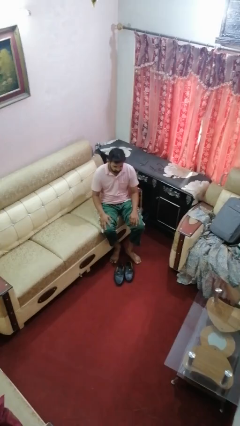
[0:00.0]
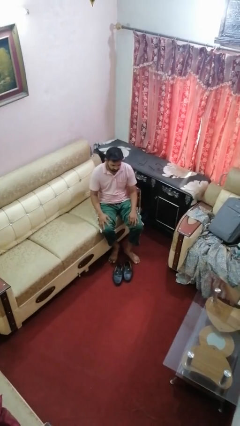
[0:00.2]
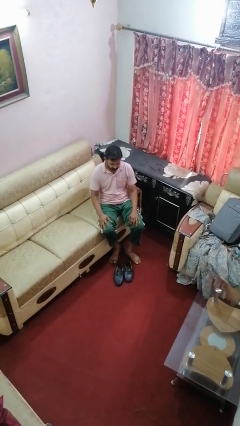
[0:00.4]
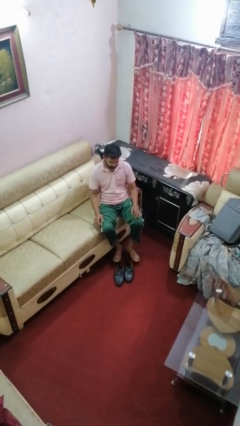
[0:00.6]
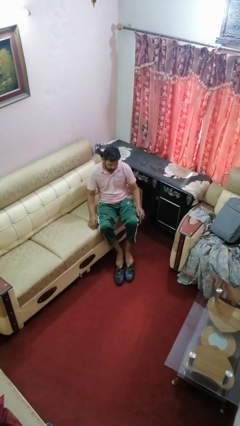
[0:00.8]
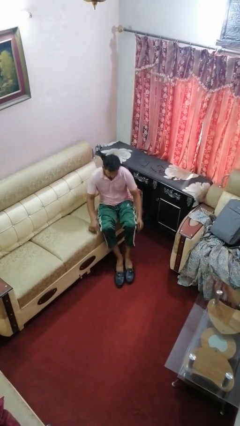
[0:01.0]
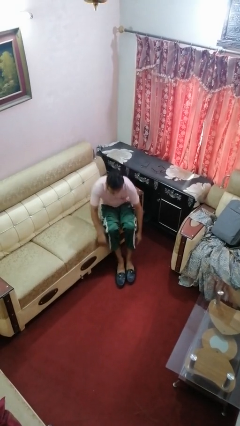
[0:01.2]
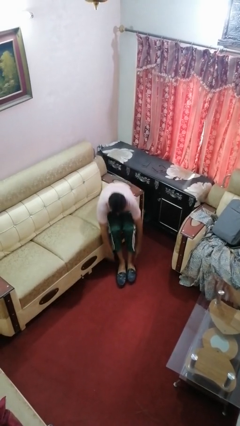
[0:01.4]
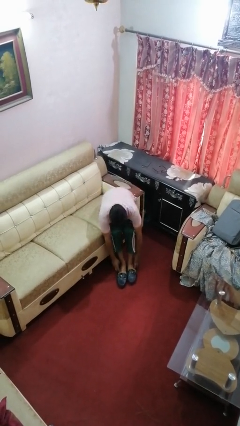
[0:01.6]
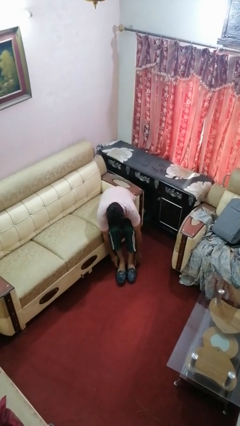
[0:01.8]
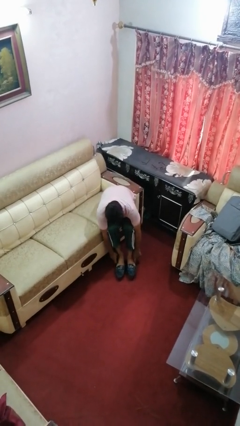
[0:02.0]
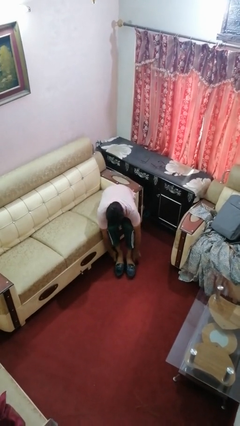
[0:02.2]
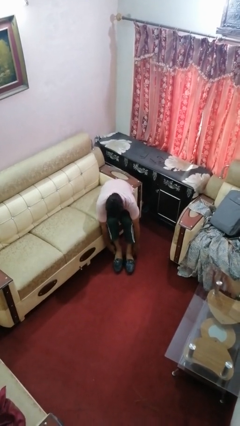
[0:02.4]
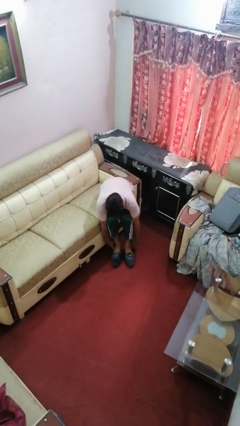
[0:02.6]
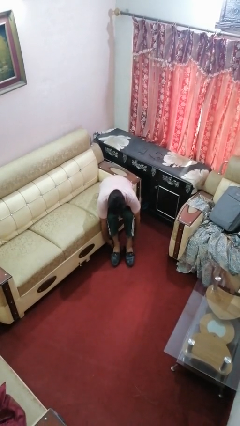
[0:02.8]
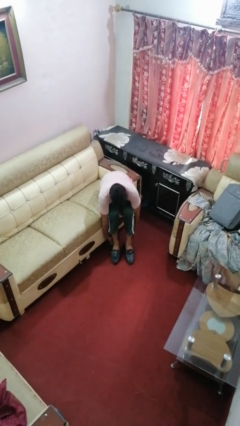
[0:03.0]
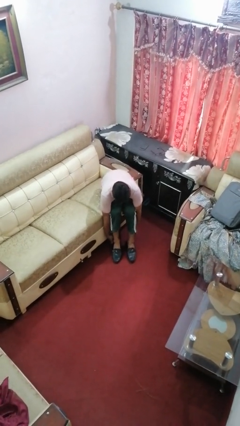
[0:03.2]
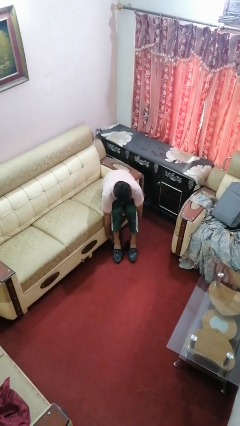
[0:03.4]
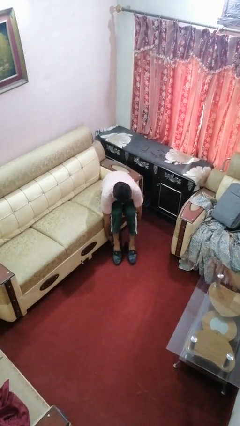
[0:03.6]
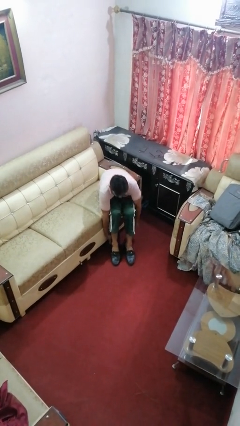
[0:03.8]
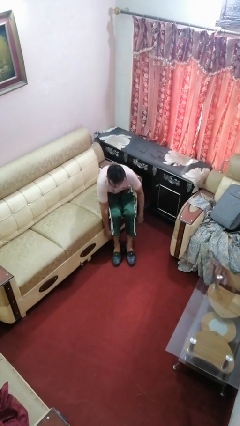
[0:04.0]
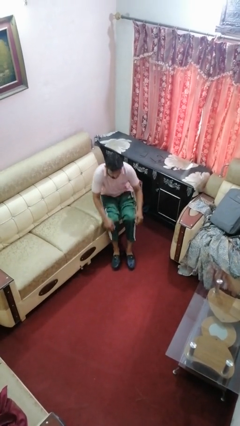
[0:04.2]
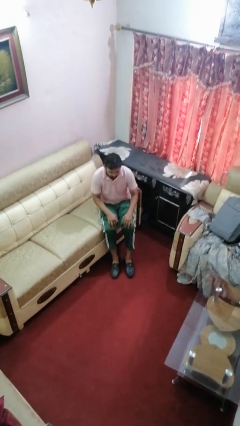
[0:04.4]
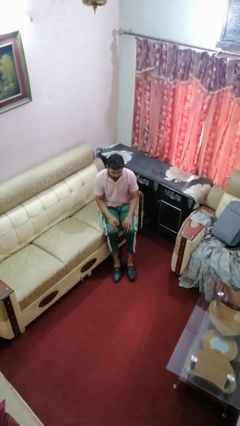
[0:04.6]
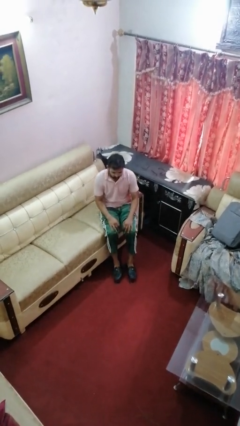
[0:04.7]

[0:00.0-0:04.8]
person puts on shoes

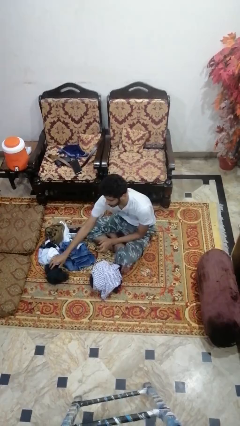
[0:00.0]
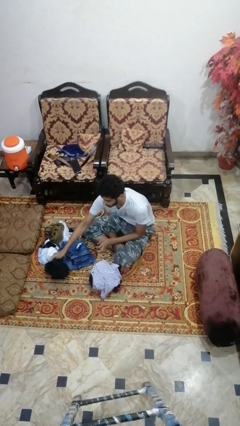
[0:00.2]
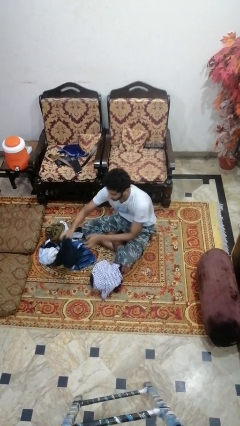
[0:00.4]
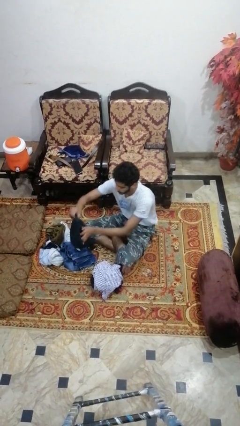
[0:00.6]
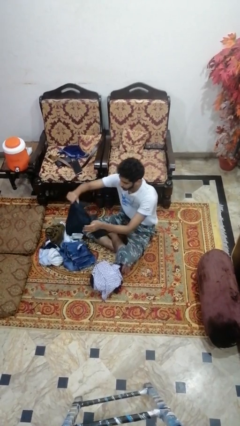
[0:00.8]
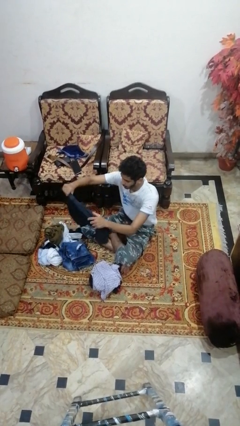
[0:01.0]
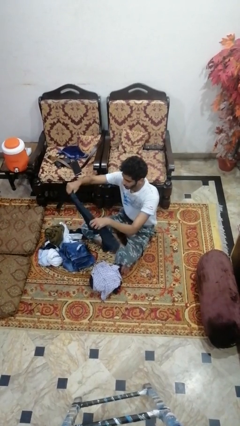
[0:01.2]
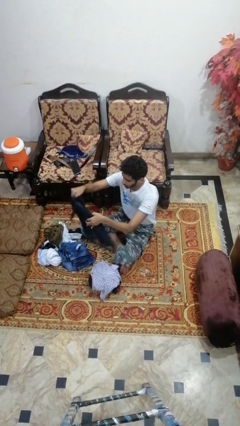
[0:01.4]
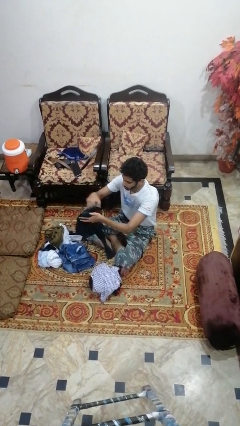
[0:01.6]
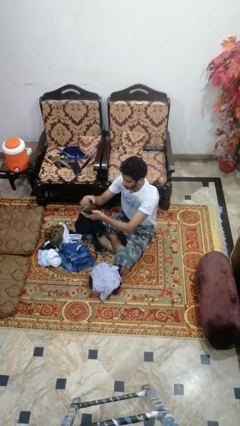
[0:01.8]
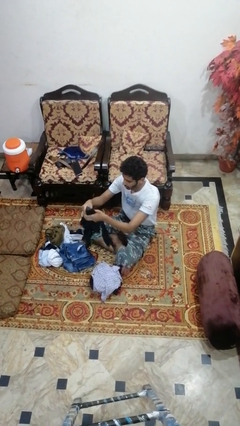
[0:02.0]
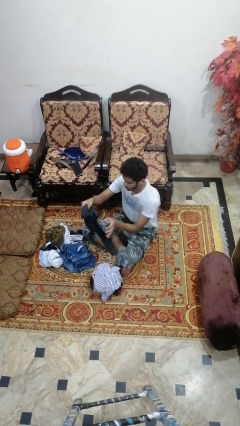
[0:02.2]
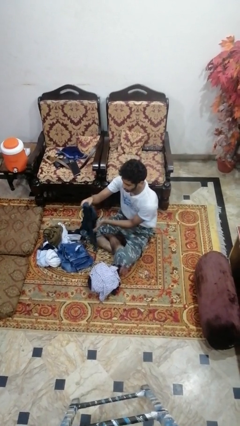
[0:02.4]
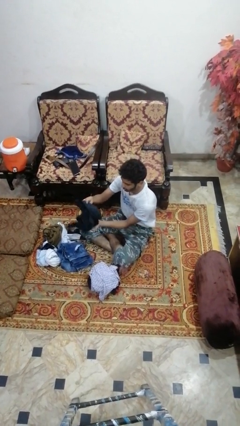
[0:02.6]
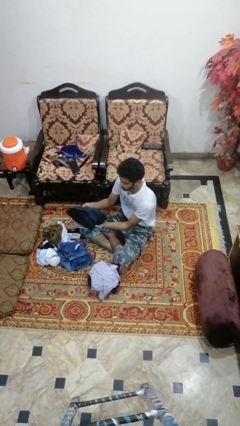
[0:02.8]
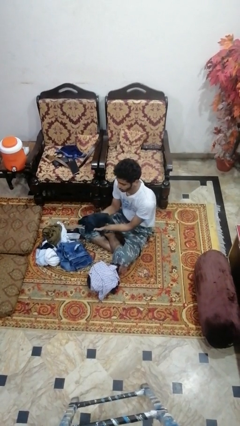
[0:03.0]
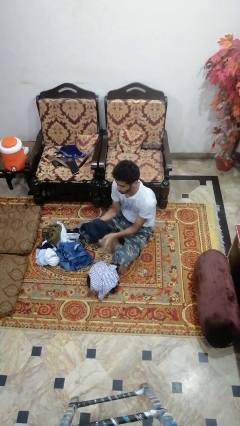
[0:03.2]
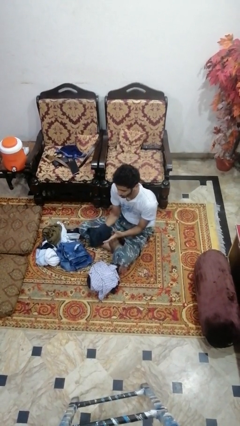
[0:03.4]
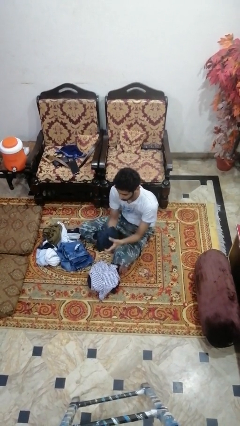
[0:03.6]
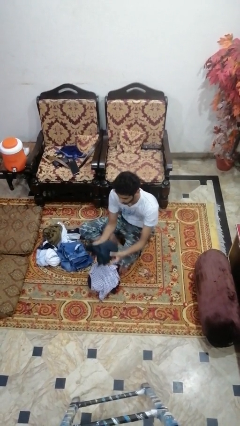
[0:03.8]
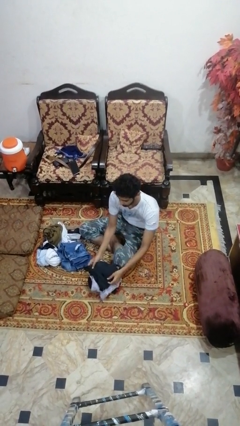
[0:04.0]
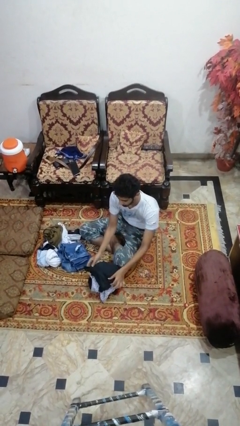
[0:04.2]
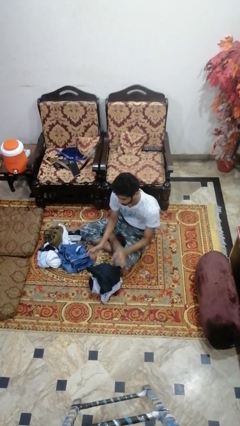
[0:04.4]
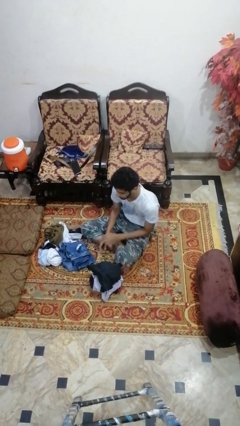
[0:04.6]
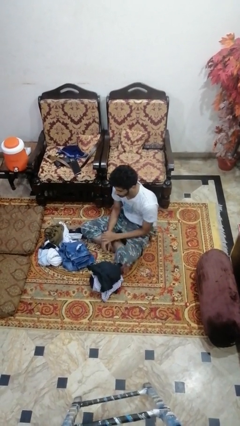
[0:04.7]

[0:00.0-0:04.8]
person folds shirt

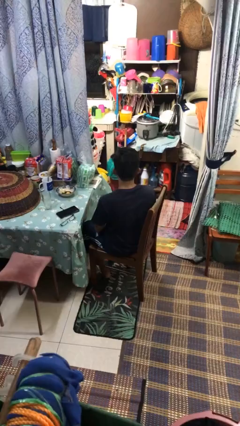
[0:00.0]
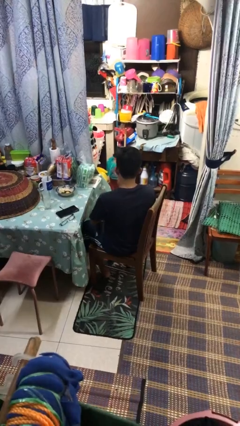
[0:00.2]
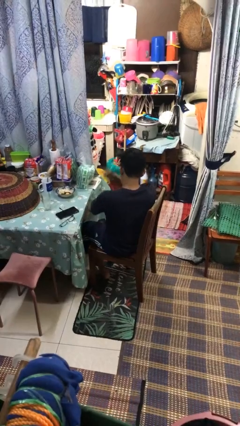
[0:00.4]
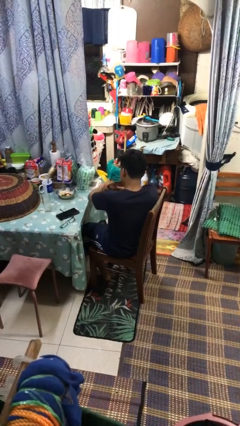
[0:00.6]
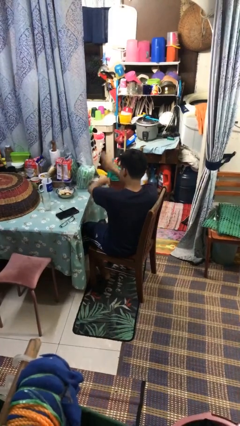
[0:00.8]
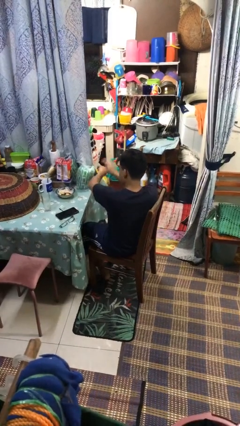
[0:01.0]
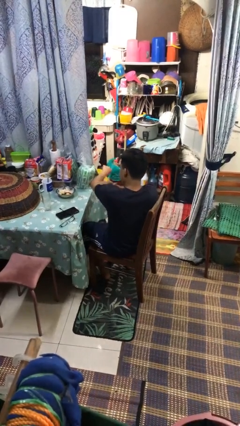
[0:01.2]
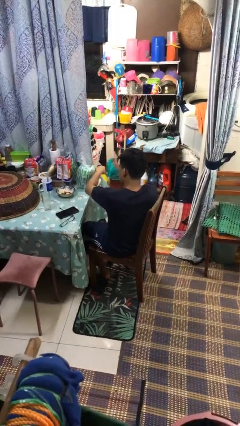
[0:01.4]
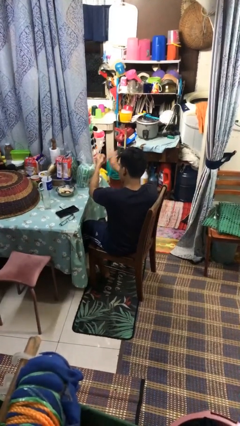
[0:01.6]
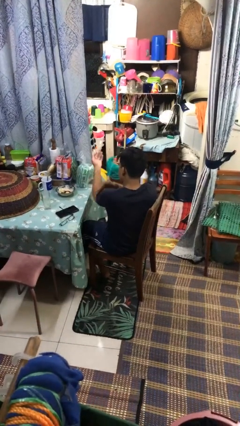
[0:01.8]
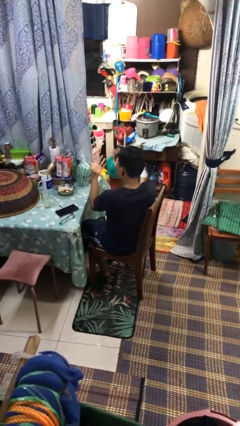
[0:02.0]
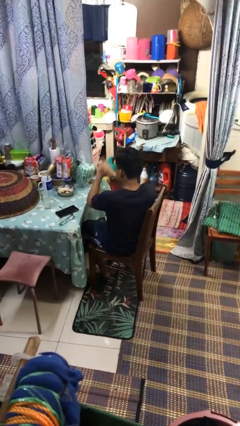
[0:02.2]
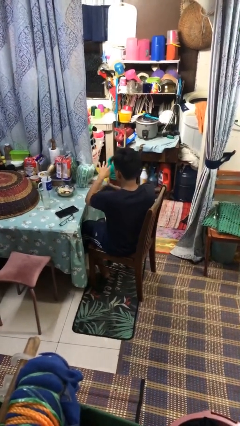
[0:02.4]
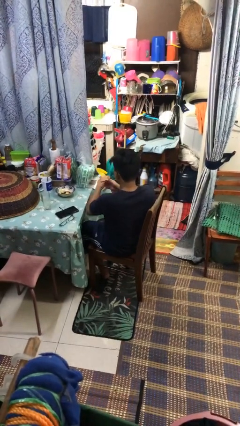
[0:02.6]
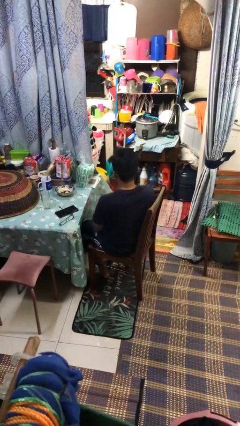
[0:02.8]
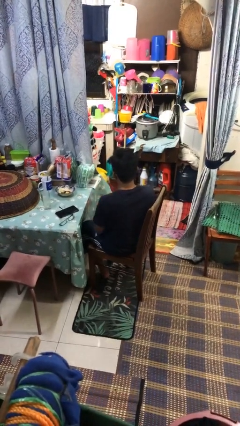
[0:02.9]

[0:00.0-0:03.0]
person swats bug

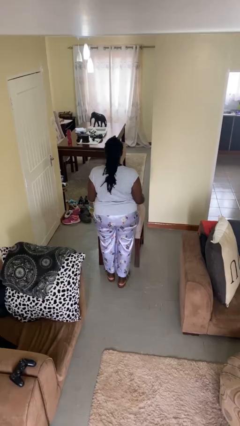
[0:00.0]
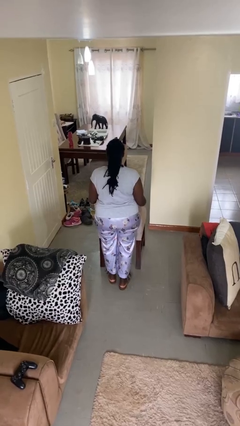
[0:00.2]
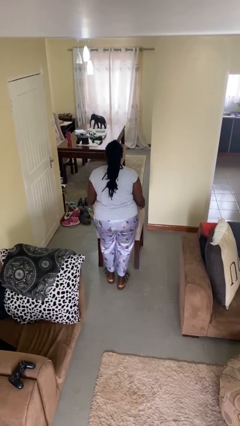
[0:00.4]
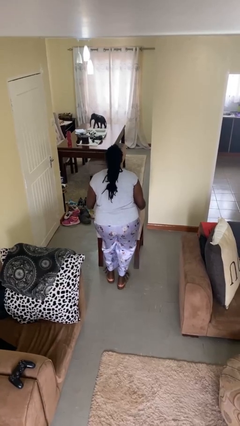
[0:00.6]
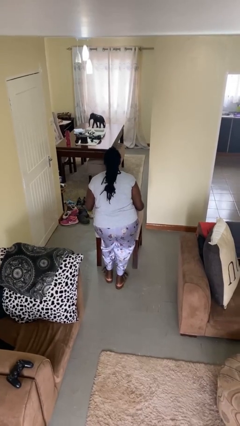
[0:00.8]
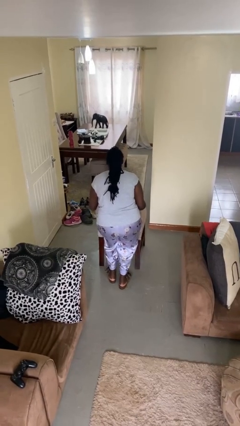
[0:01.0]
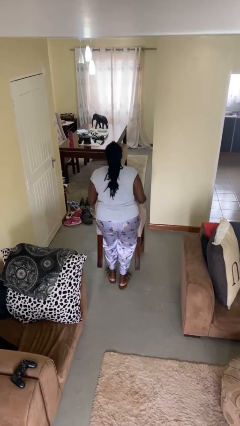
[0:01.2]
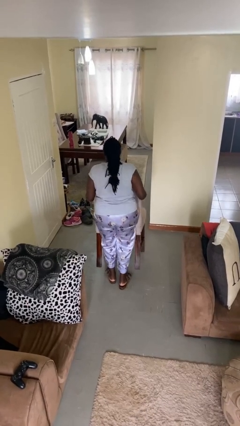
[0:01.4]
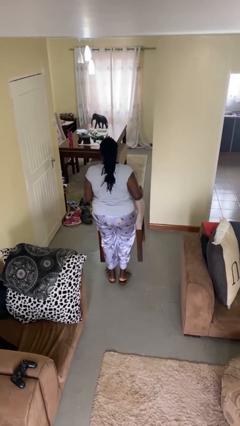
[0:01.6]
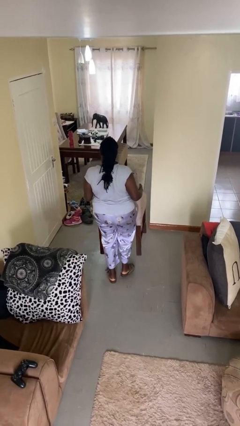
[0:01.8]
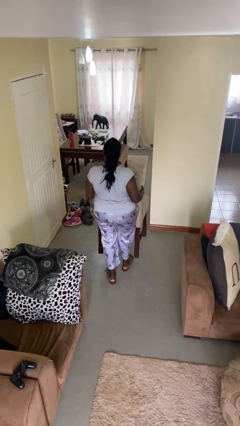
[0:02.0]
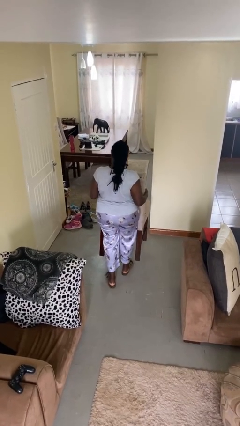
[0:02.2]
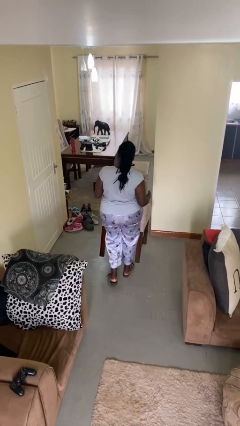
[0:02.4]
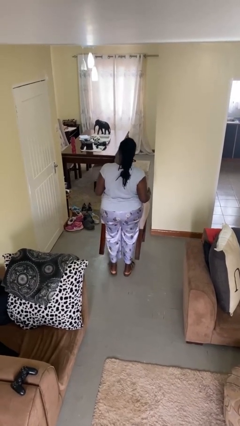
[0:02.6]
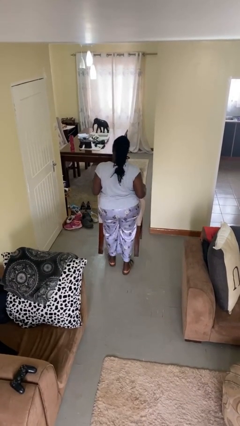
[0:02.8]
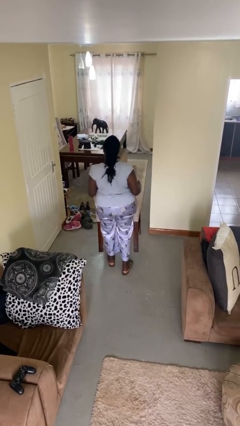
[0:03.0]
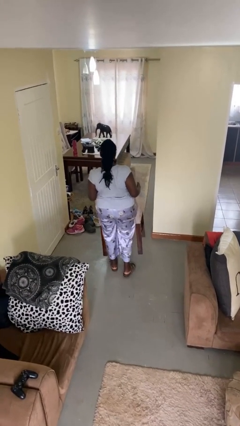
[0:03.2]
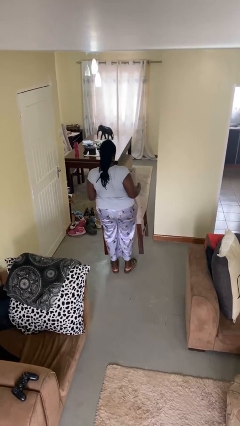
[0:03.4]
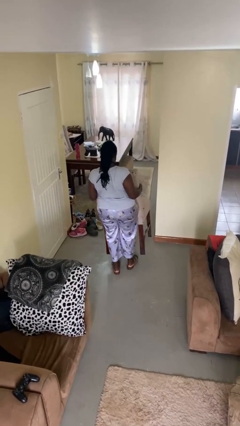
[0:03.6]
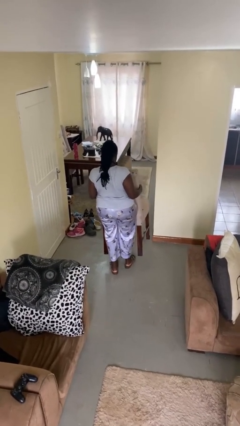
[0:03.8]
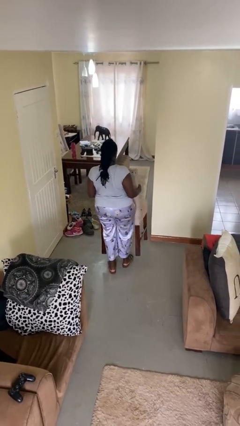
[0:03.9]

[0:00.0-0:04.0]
person carries furniture

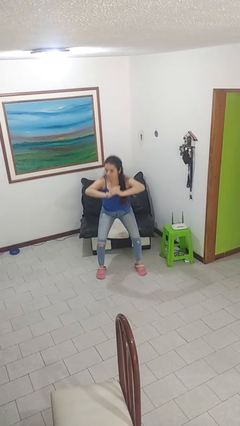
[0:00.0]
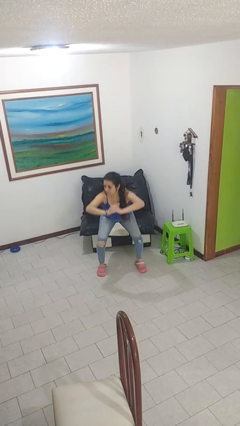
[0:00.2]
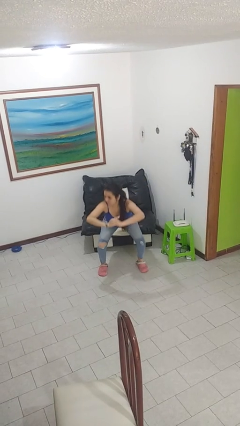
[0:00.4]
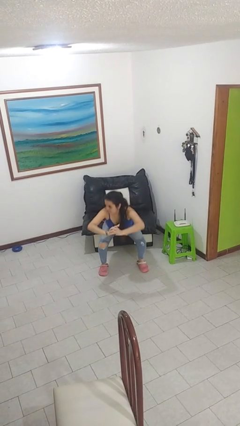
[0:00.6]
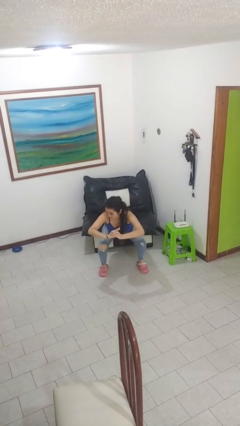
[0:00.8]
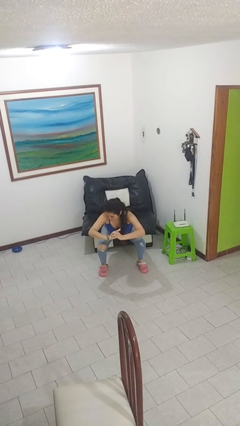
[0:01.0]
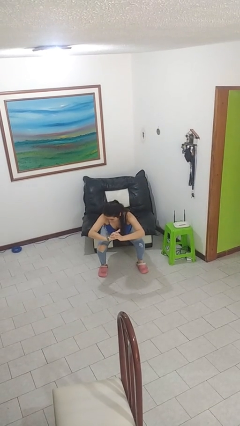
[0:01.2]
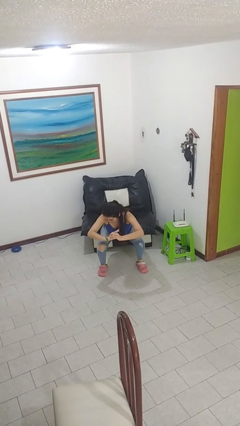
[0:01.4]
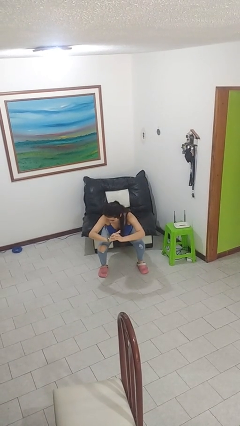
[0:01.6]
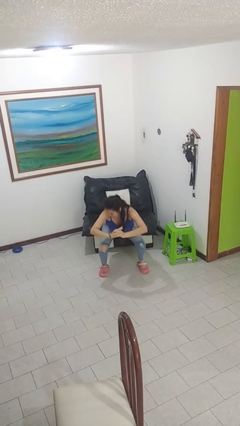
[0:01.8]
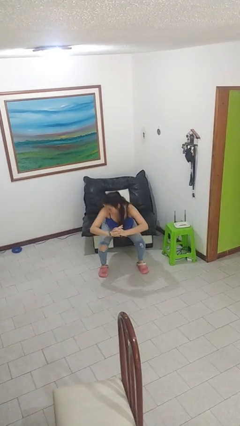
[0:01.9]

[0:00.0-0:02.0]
person squats
